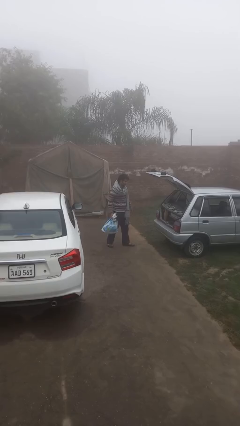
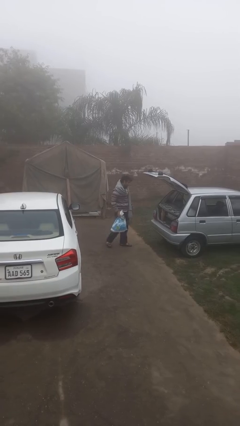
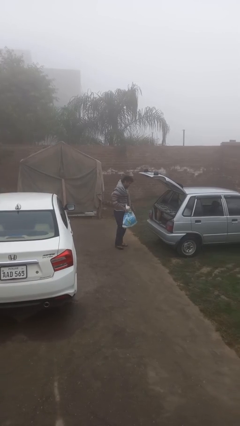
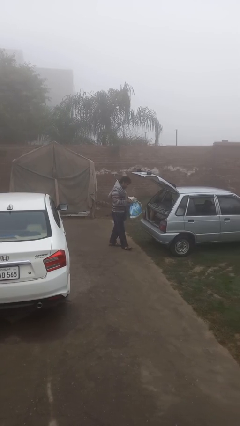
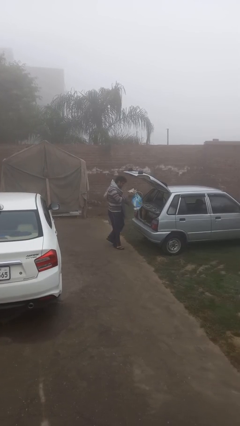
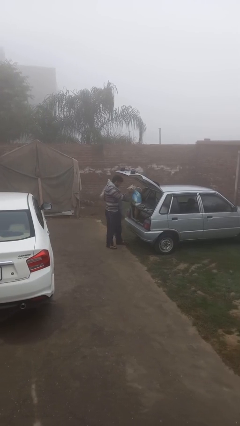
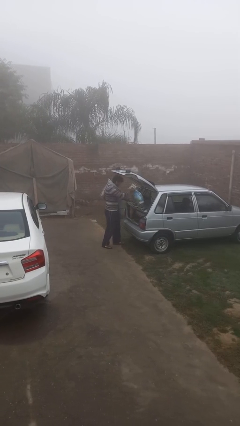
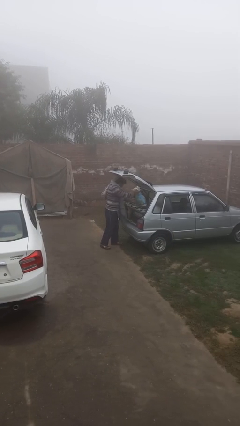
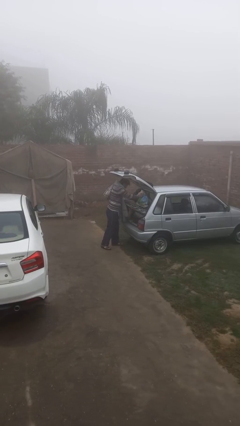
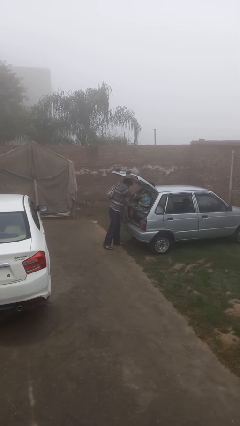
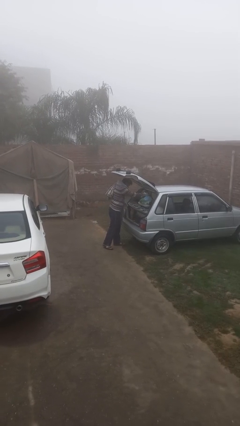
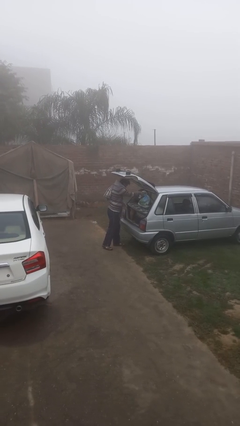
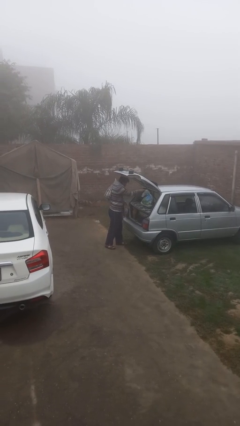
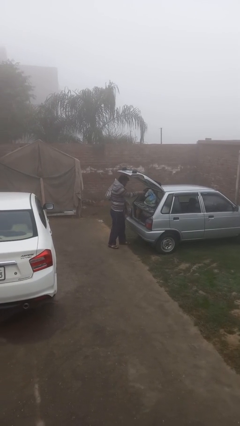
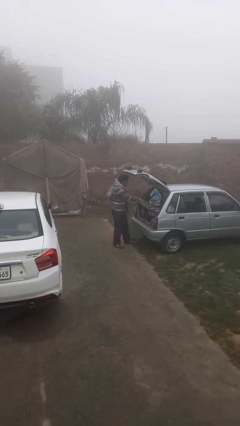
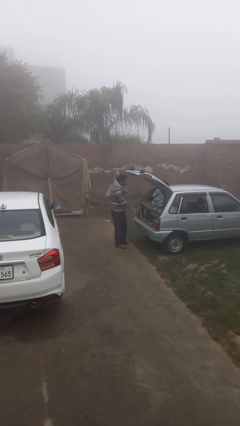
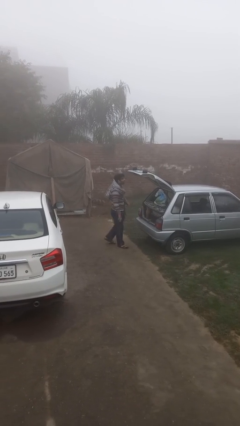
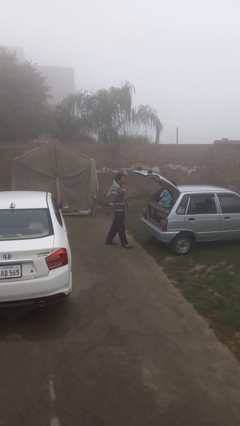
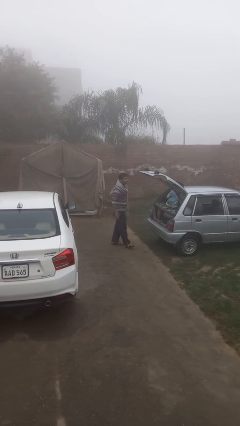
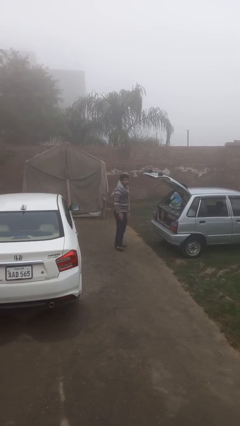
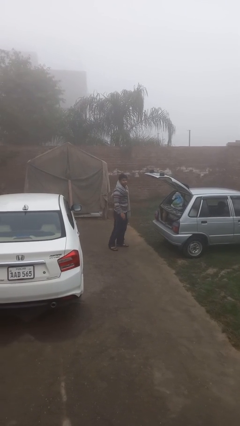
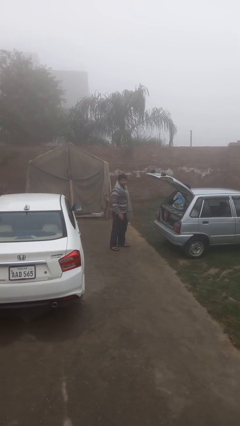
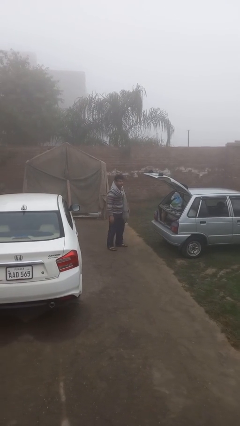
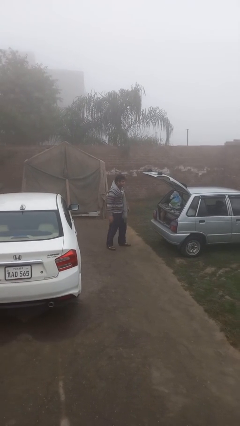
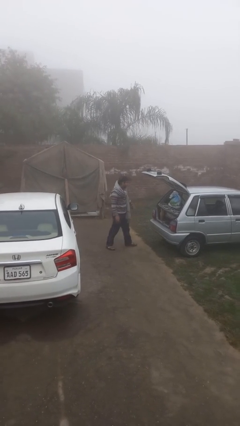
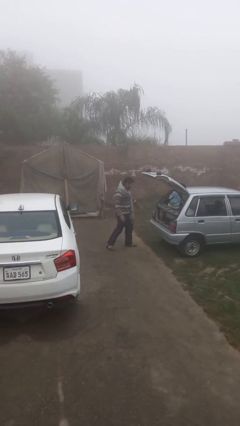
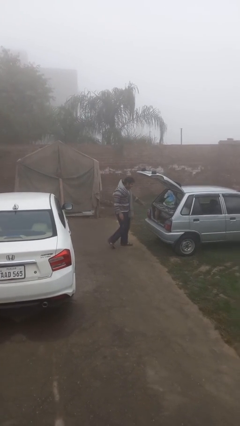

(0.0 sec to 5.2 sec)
person loads car

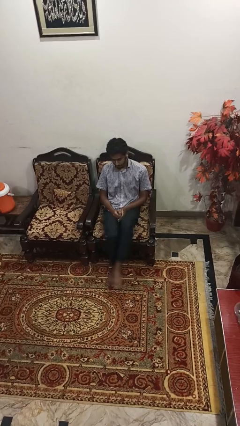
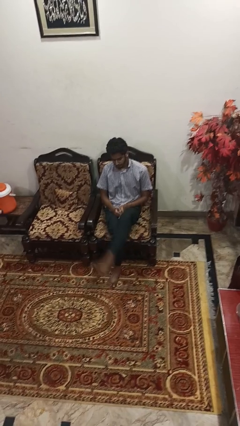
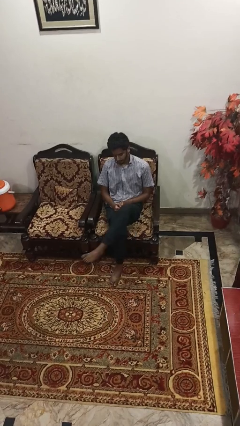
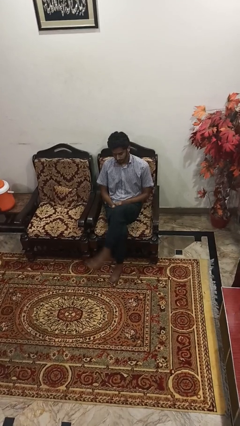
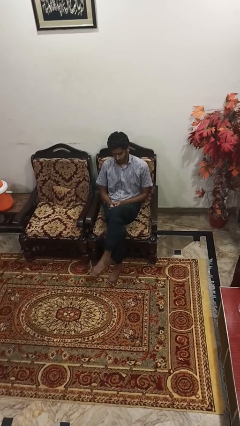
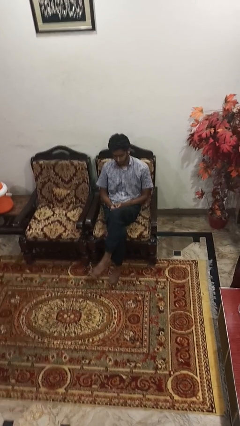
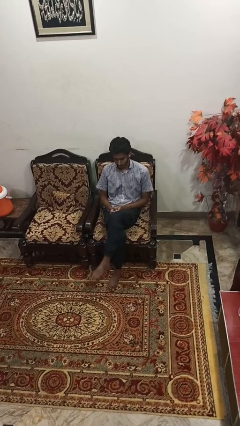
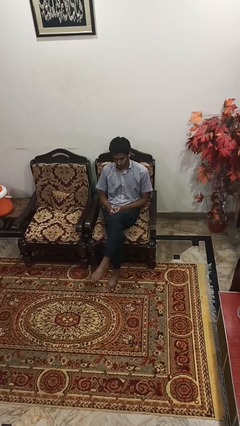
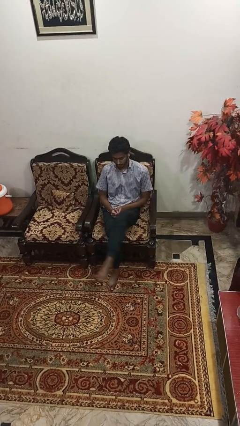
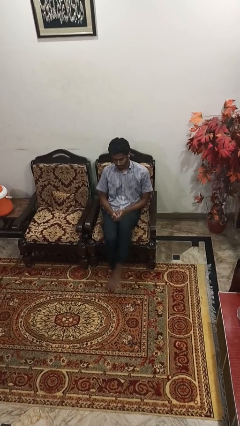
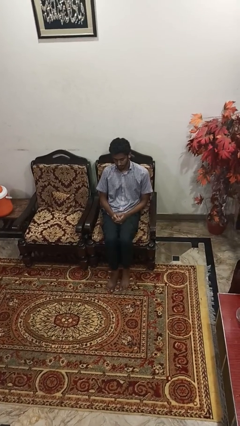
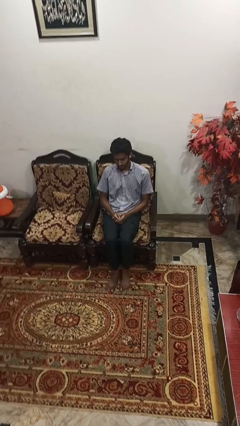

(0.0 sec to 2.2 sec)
person crosses legs

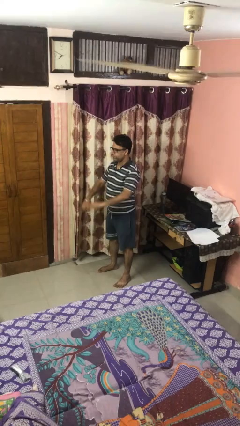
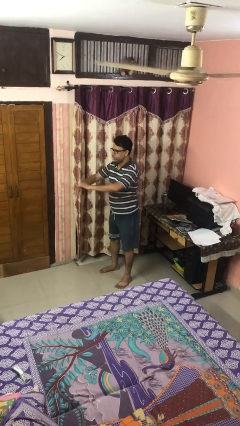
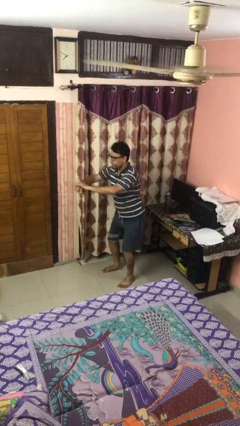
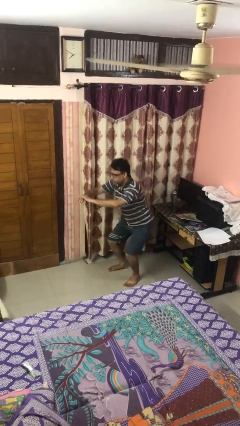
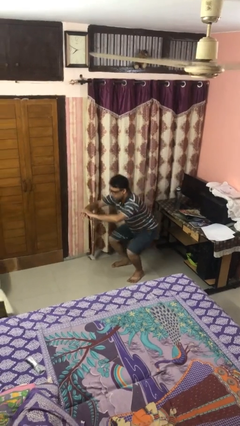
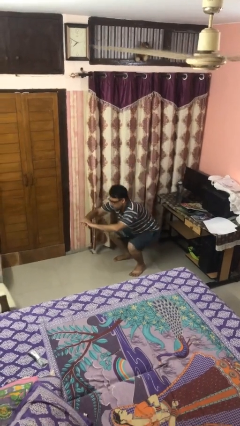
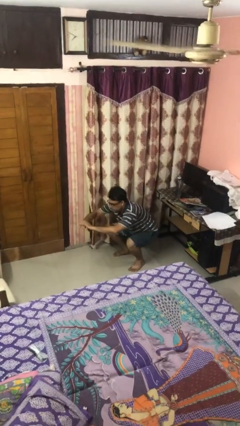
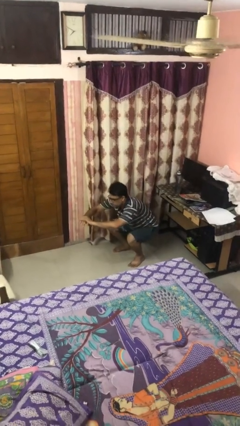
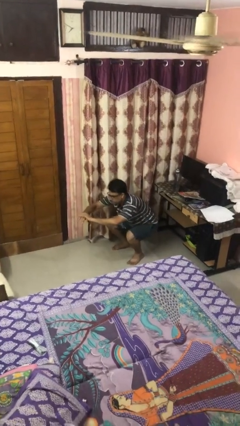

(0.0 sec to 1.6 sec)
person squats

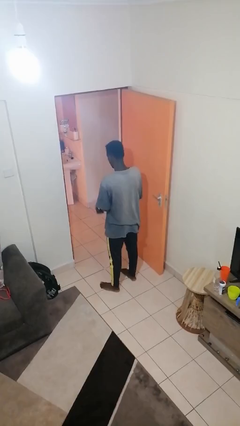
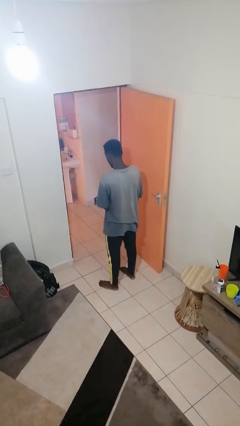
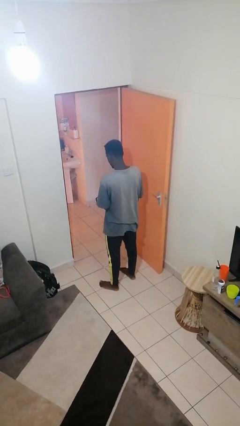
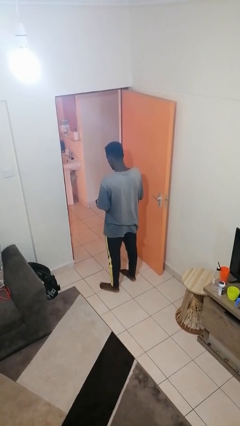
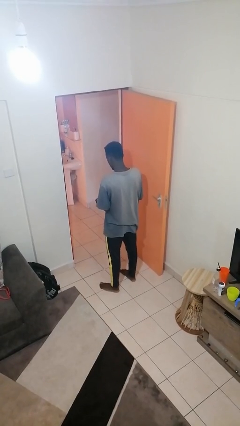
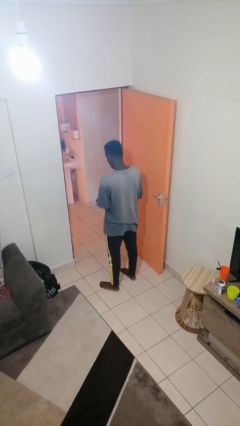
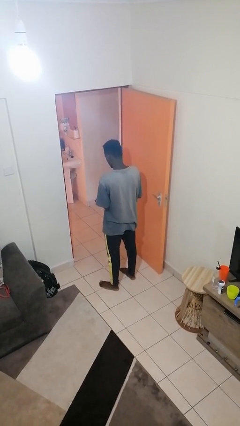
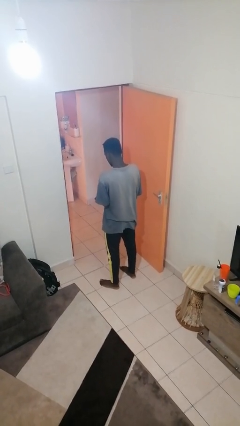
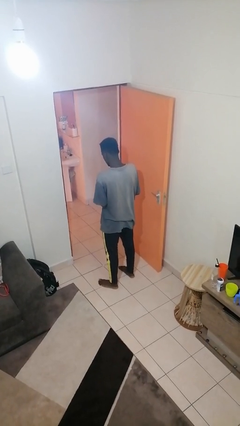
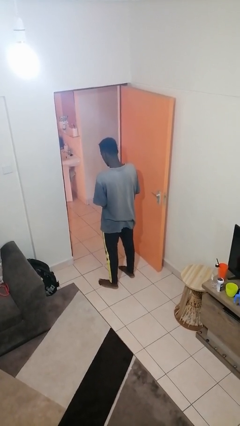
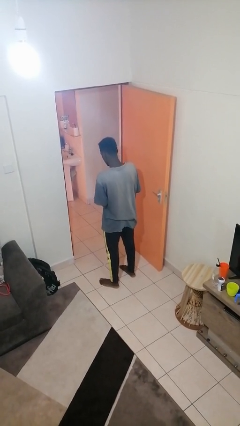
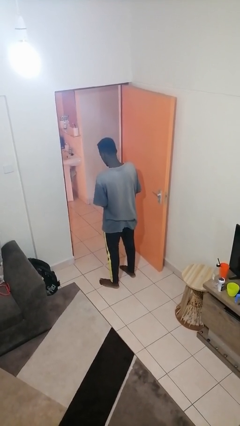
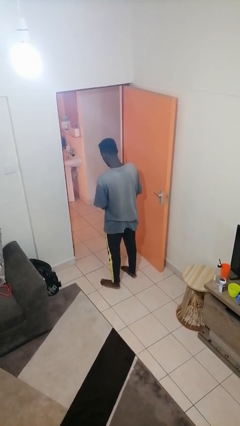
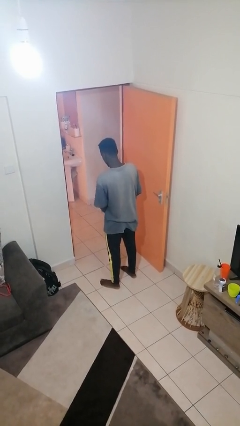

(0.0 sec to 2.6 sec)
person takes off wristwatch

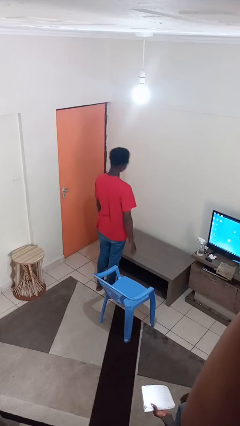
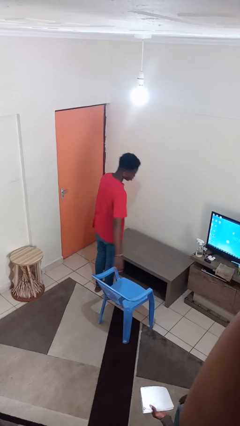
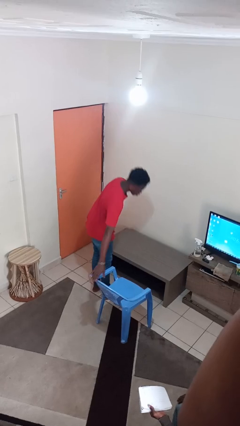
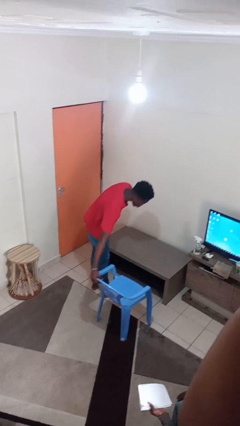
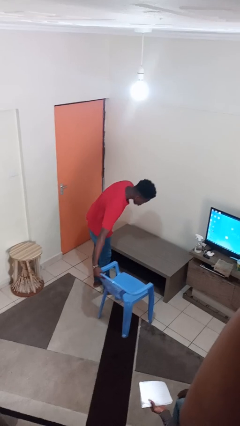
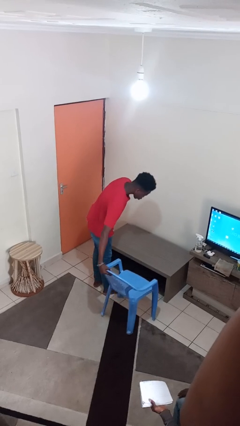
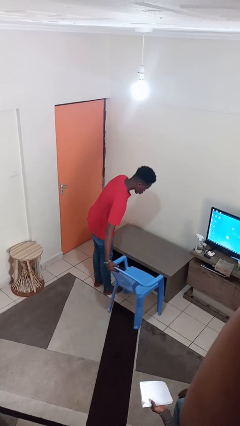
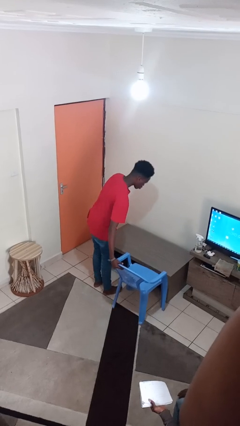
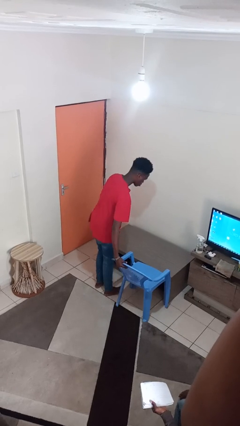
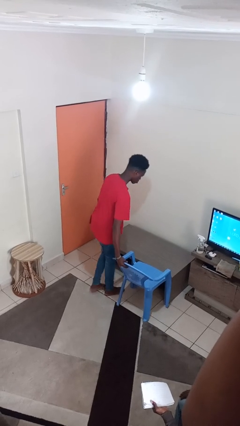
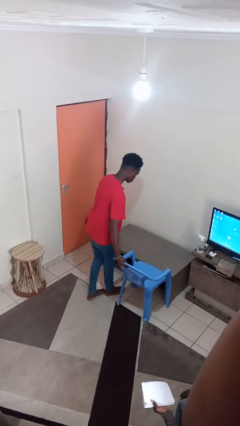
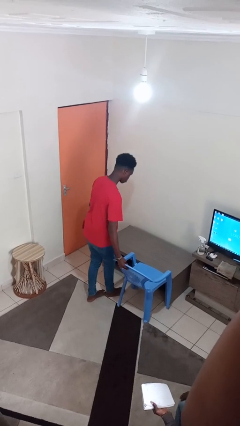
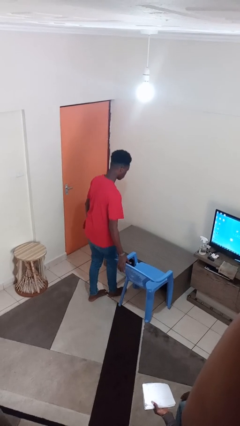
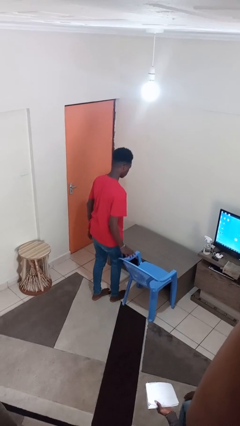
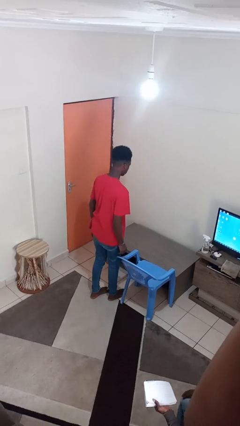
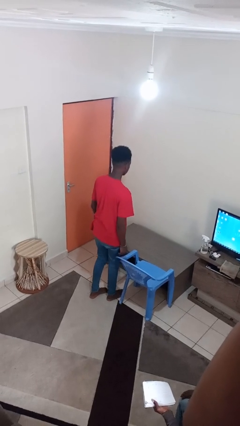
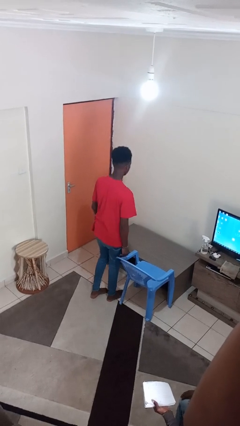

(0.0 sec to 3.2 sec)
person pushes in chair

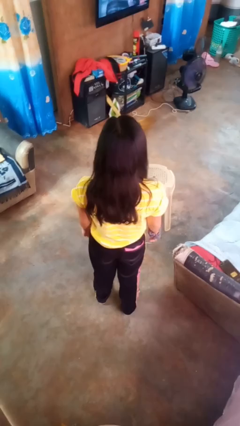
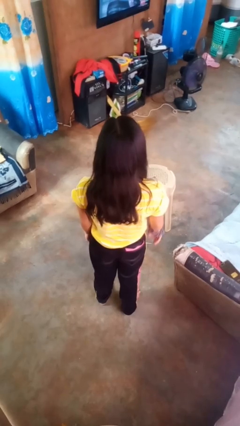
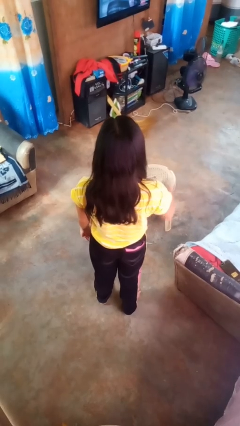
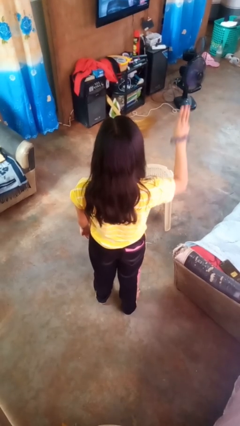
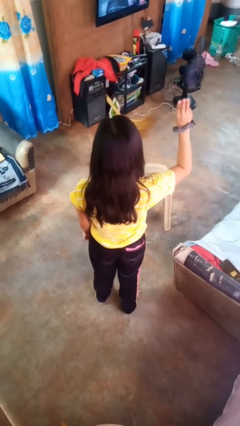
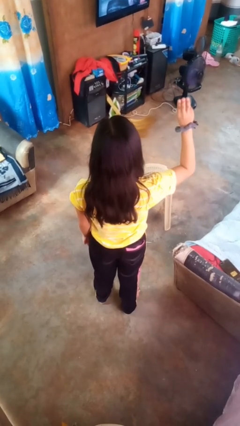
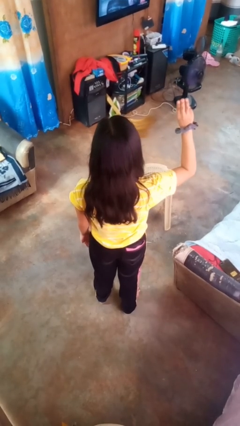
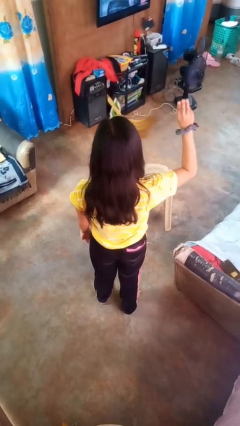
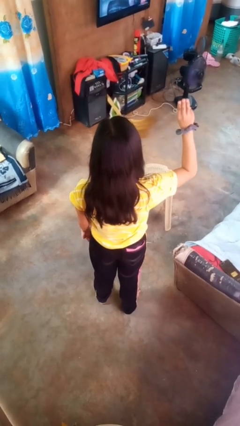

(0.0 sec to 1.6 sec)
person gestures number three

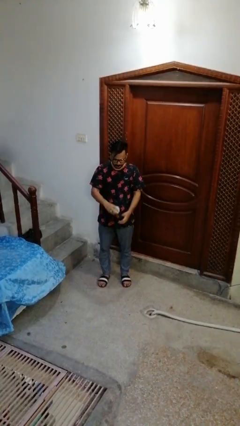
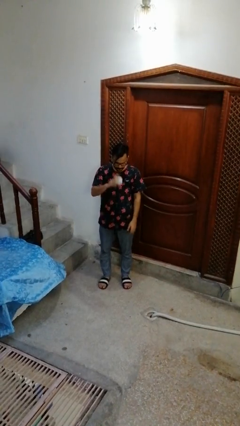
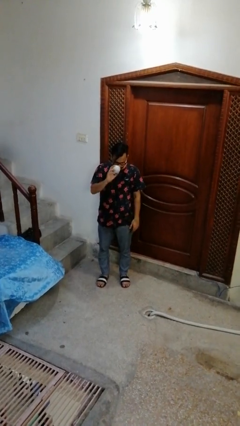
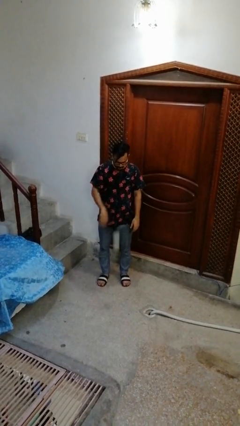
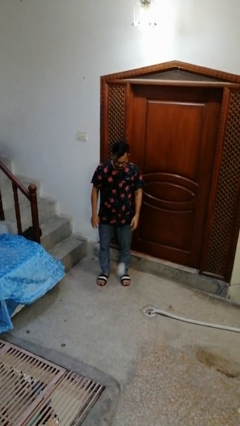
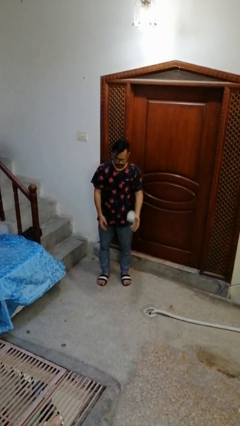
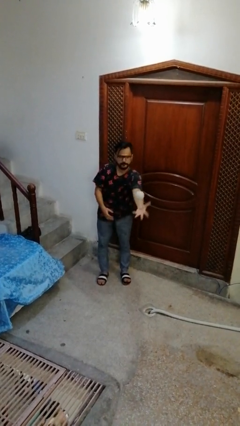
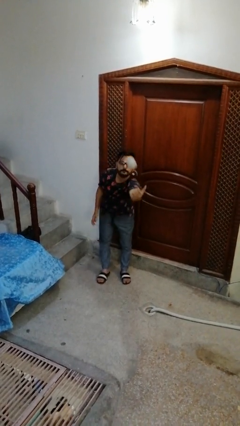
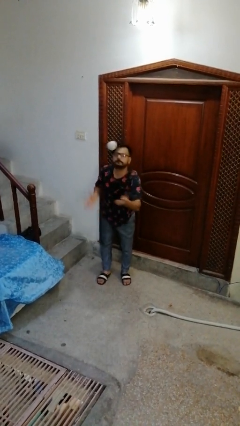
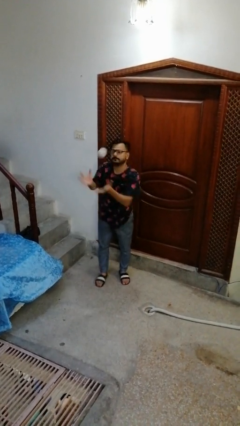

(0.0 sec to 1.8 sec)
person bounces ball on floor
